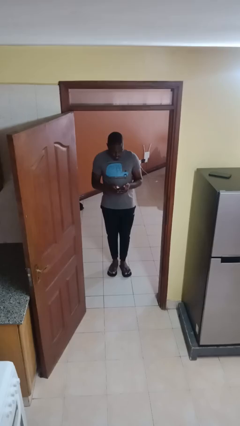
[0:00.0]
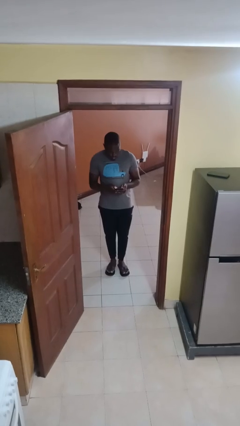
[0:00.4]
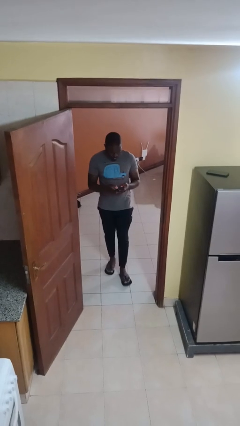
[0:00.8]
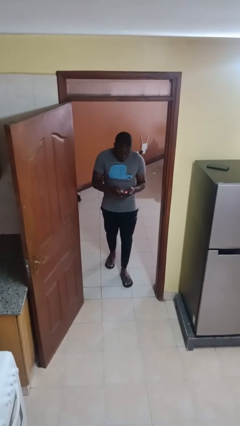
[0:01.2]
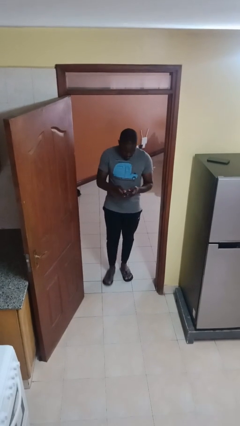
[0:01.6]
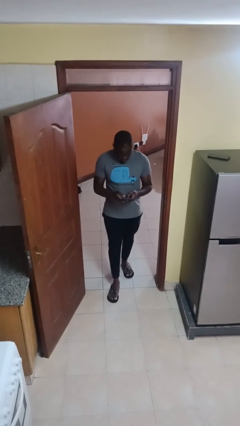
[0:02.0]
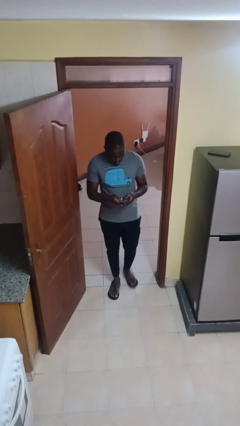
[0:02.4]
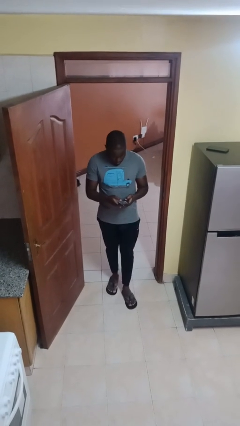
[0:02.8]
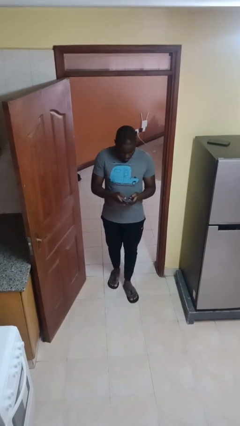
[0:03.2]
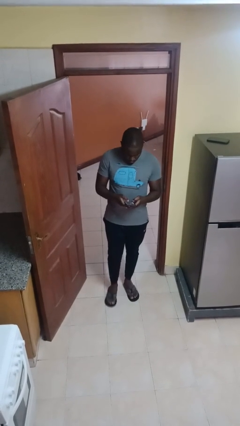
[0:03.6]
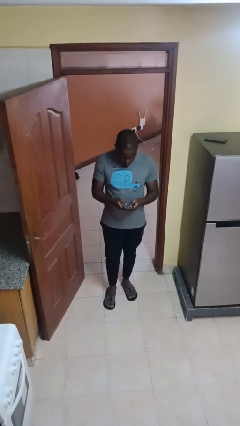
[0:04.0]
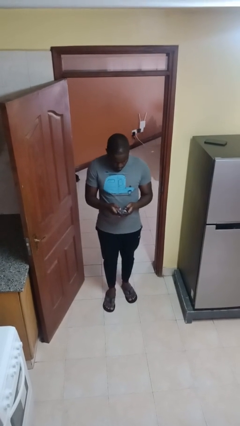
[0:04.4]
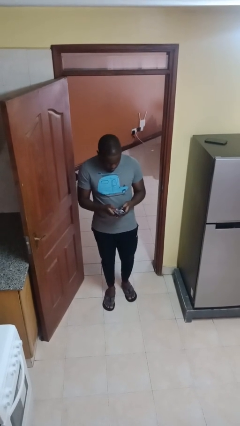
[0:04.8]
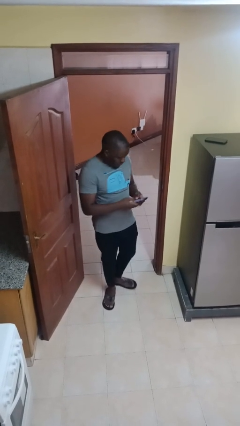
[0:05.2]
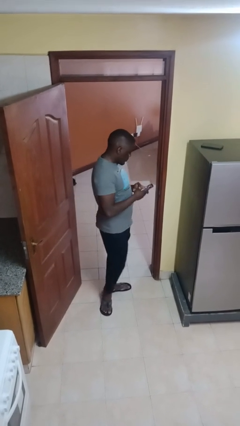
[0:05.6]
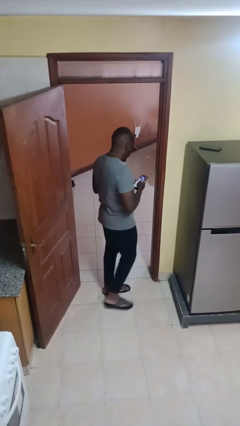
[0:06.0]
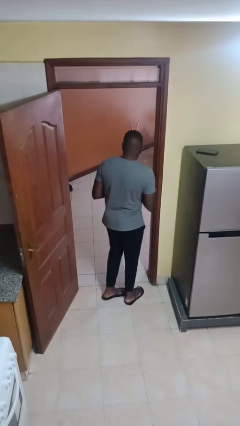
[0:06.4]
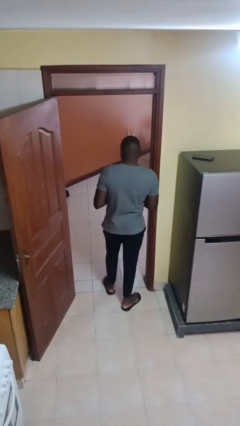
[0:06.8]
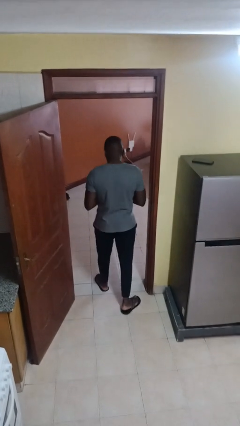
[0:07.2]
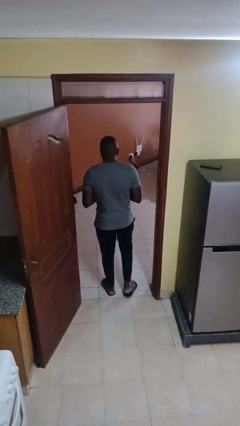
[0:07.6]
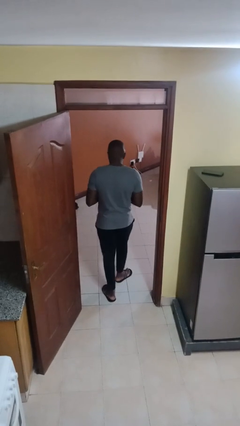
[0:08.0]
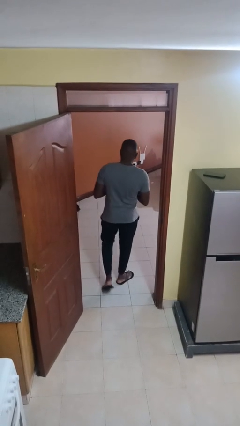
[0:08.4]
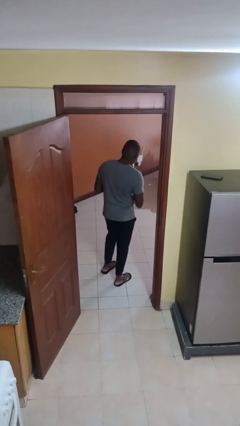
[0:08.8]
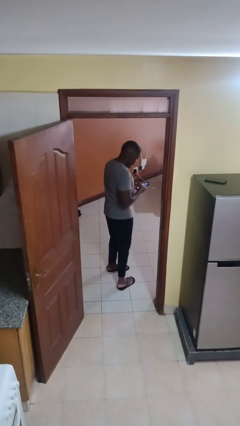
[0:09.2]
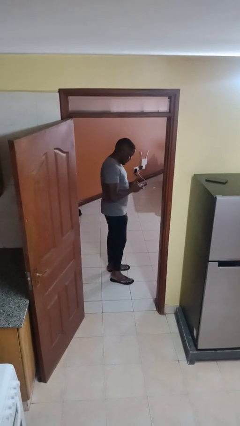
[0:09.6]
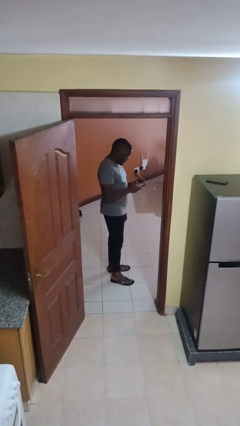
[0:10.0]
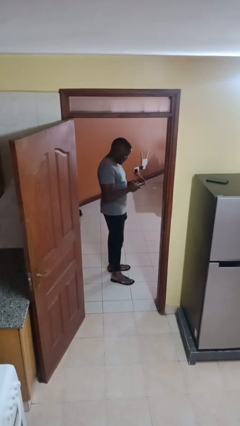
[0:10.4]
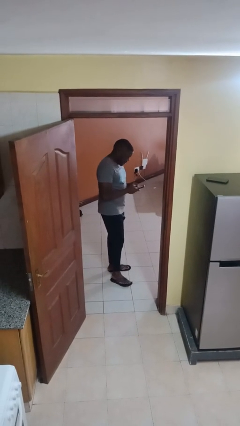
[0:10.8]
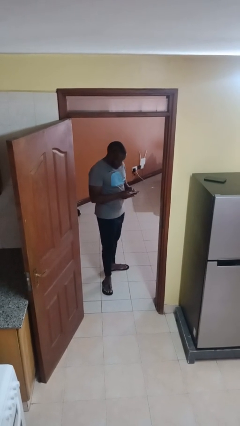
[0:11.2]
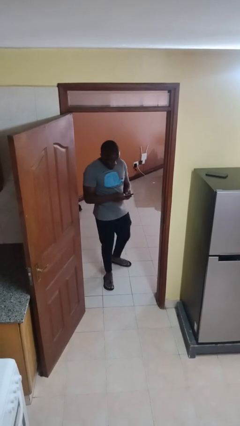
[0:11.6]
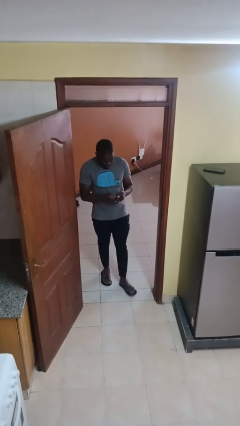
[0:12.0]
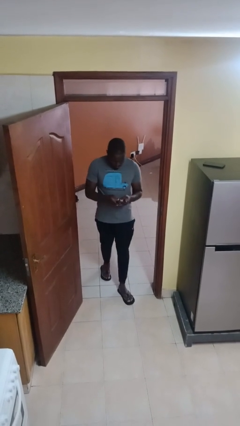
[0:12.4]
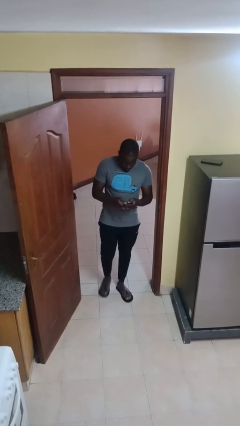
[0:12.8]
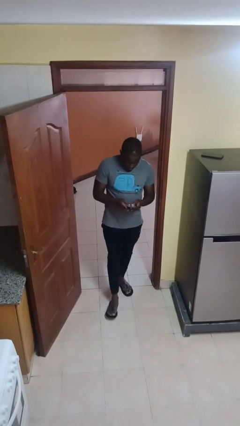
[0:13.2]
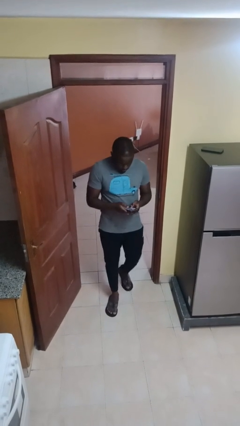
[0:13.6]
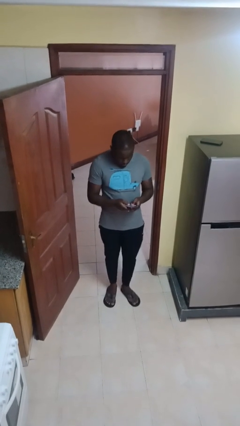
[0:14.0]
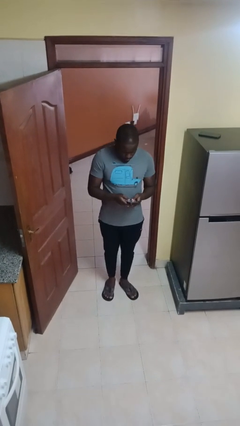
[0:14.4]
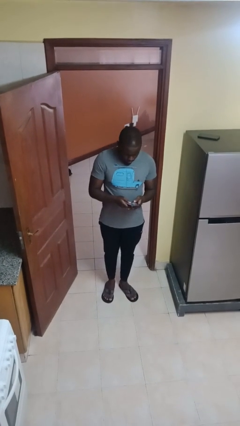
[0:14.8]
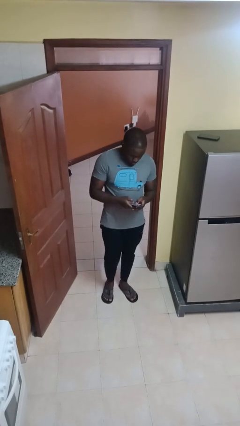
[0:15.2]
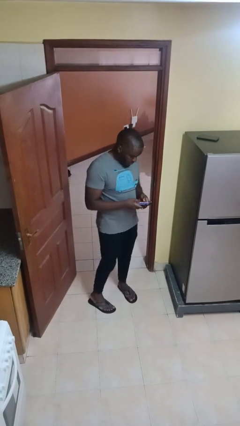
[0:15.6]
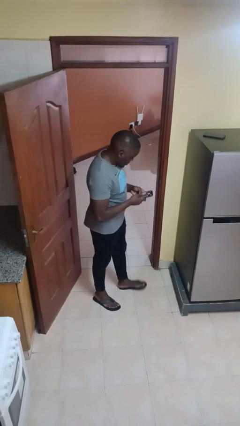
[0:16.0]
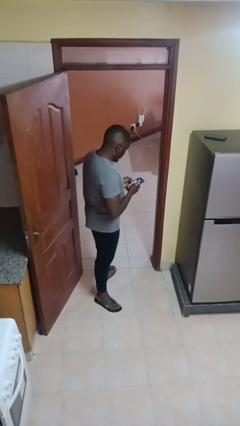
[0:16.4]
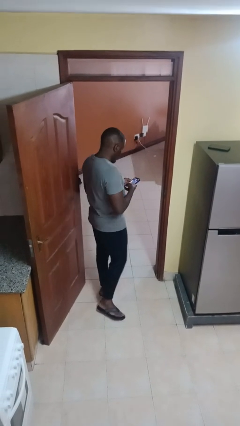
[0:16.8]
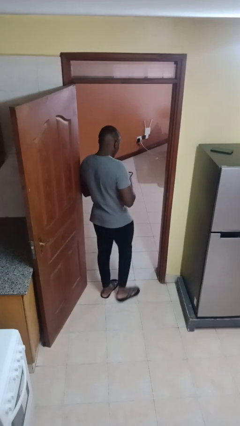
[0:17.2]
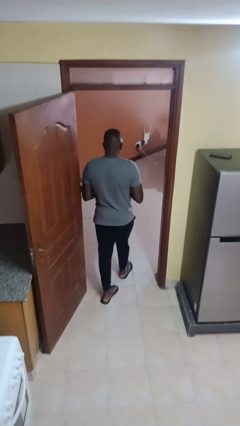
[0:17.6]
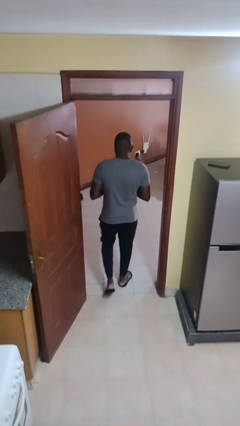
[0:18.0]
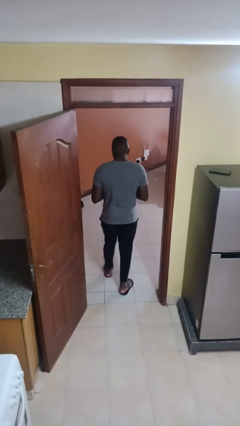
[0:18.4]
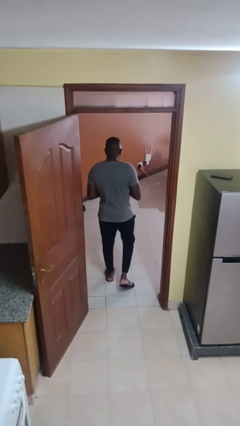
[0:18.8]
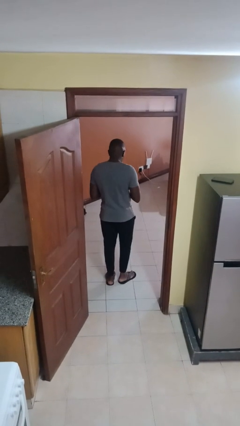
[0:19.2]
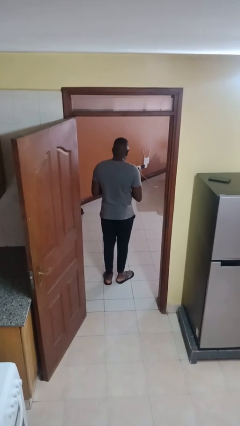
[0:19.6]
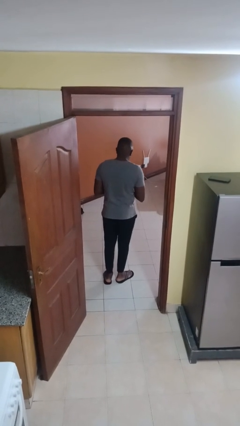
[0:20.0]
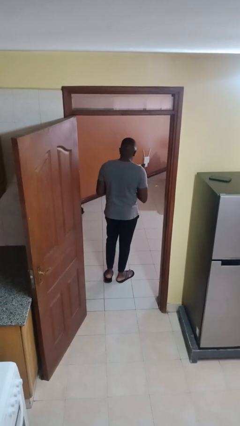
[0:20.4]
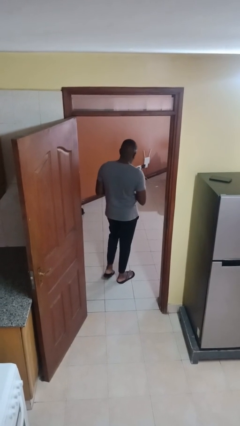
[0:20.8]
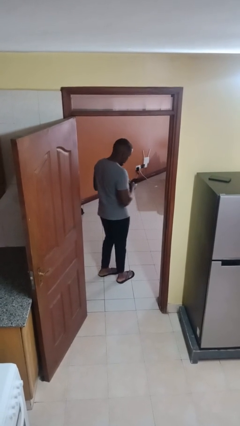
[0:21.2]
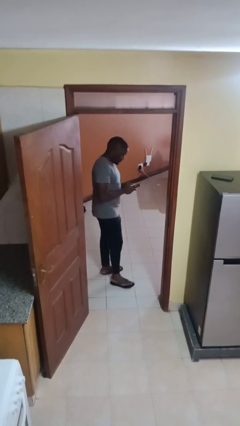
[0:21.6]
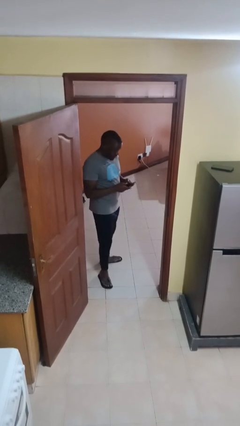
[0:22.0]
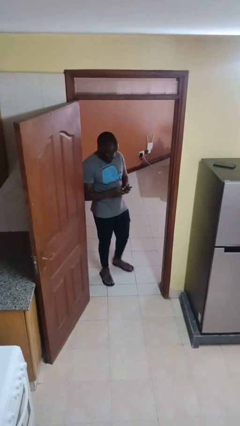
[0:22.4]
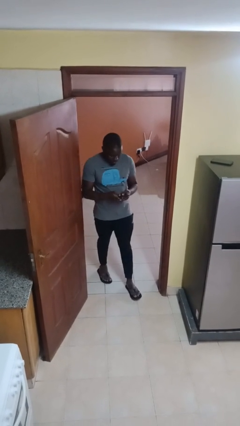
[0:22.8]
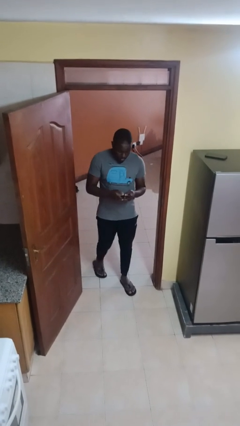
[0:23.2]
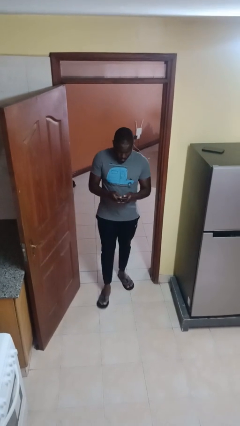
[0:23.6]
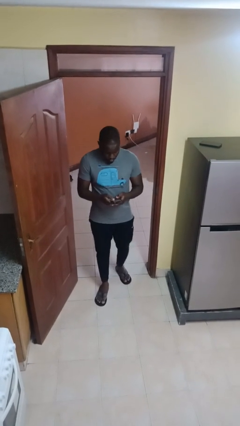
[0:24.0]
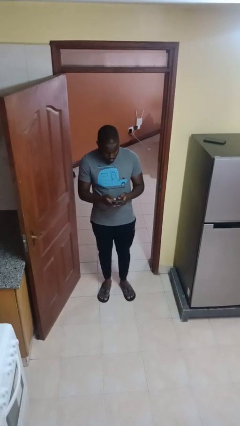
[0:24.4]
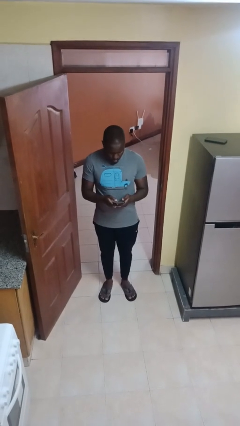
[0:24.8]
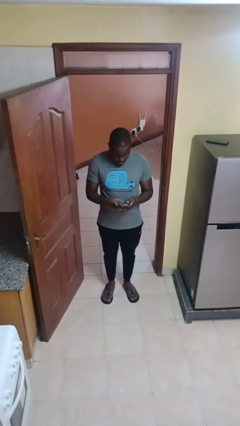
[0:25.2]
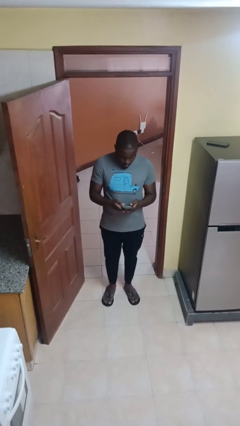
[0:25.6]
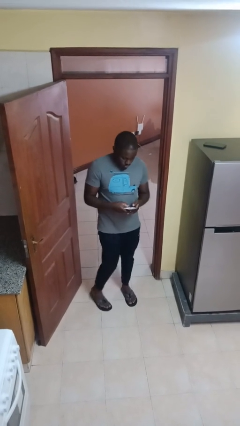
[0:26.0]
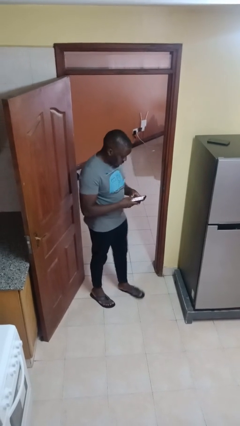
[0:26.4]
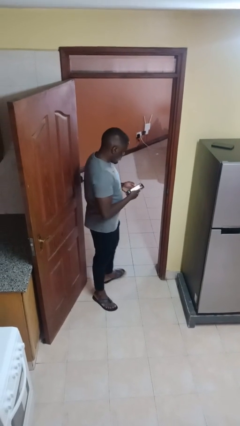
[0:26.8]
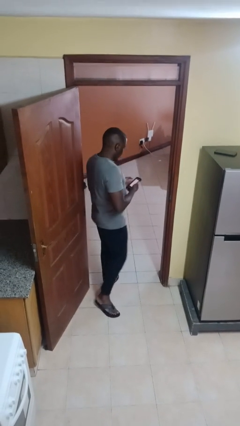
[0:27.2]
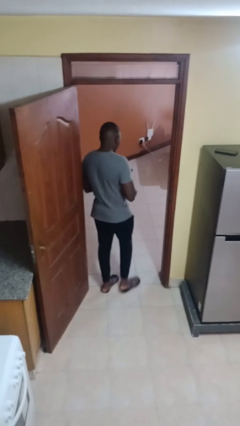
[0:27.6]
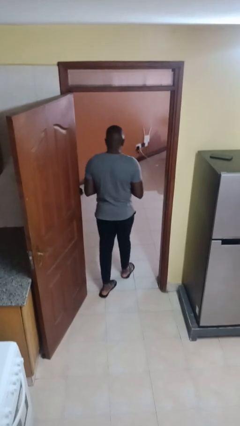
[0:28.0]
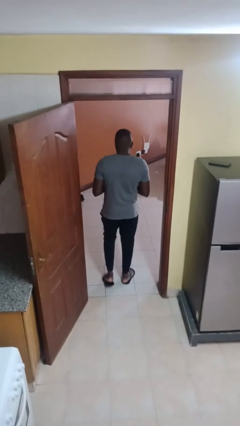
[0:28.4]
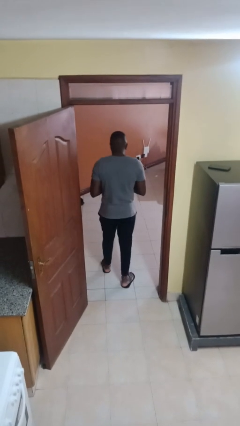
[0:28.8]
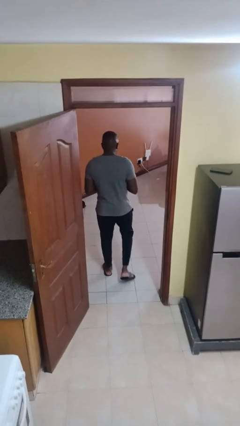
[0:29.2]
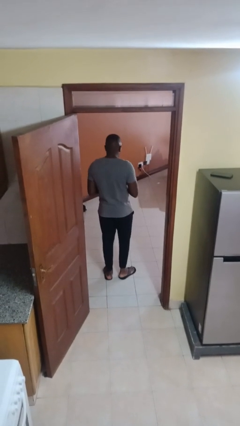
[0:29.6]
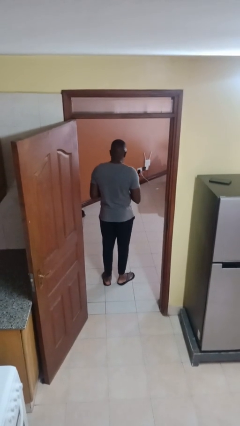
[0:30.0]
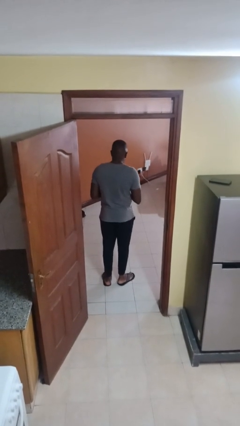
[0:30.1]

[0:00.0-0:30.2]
person texts on phone

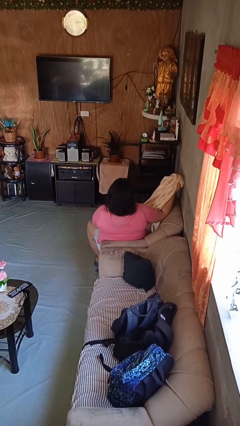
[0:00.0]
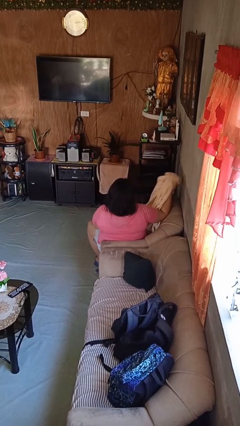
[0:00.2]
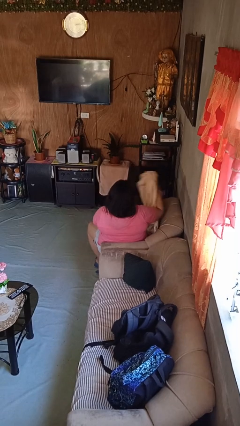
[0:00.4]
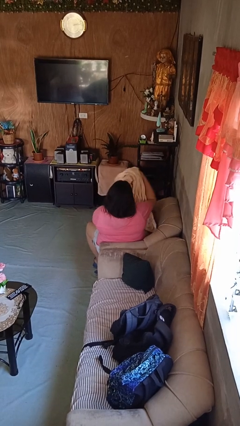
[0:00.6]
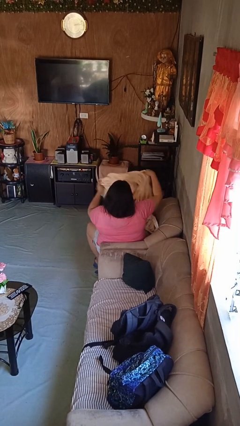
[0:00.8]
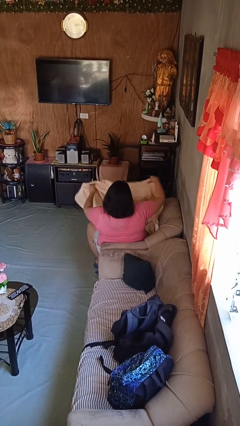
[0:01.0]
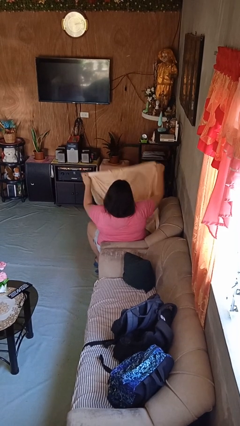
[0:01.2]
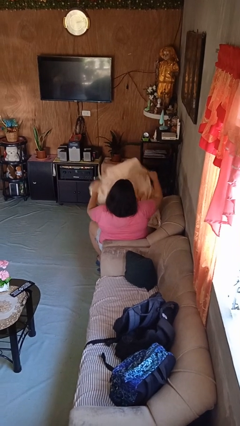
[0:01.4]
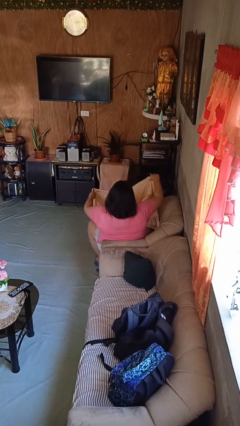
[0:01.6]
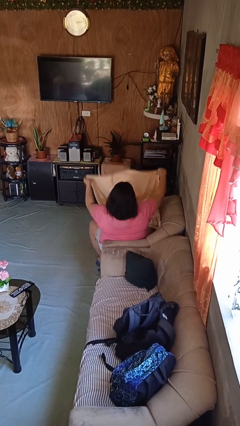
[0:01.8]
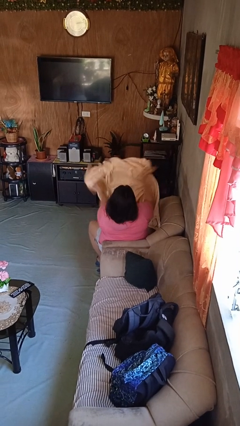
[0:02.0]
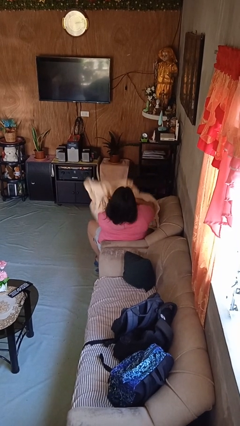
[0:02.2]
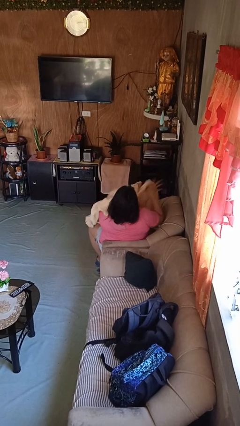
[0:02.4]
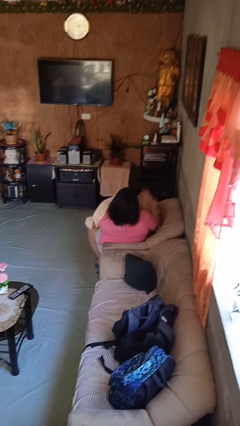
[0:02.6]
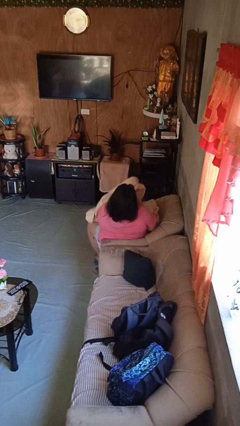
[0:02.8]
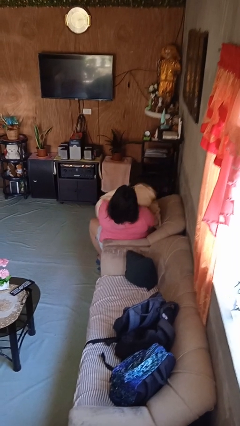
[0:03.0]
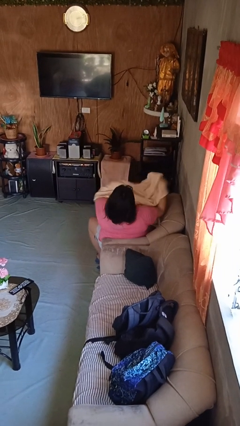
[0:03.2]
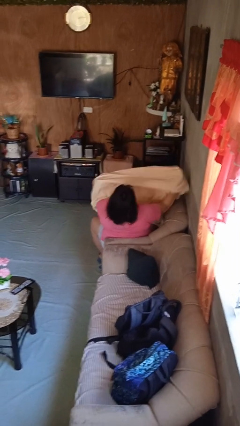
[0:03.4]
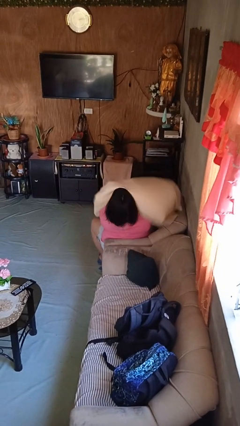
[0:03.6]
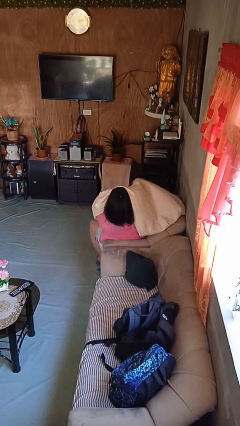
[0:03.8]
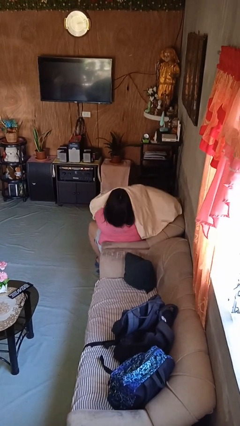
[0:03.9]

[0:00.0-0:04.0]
person covers with blanket
